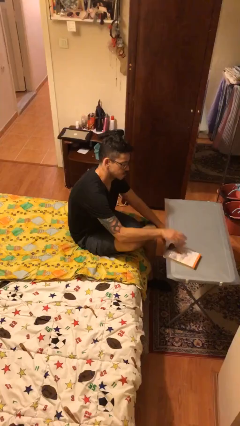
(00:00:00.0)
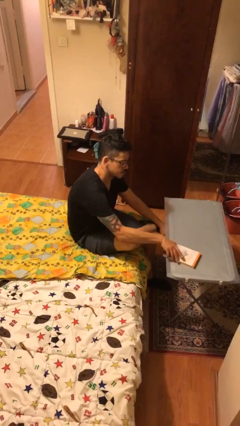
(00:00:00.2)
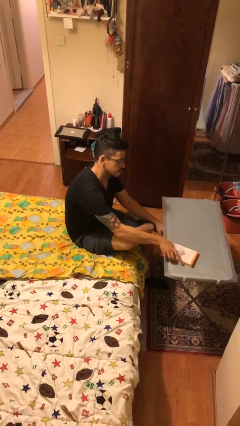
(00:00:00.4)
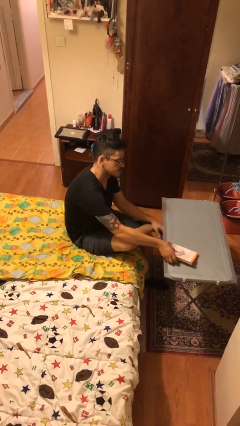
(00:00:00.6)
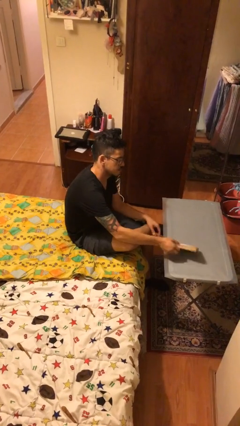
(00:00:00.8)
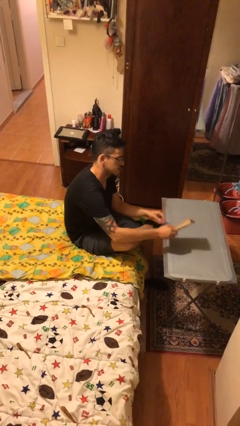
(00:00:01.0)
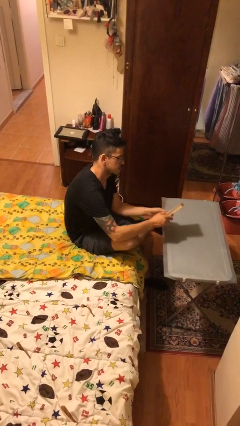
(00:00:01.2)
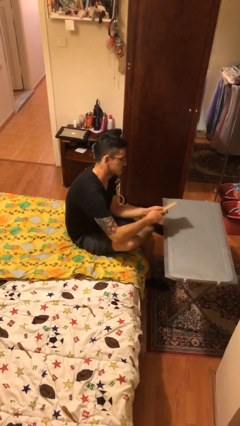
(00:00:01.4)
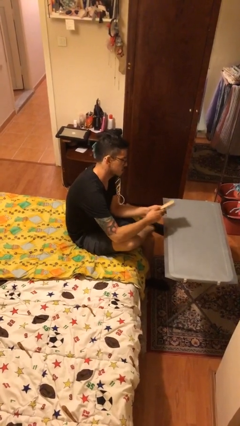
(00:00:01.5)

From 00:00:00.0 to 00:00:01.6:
person picks up object from table

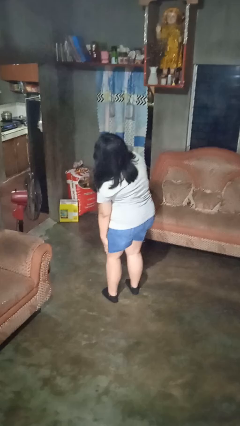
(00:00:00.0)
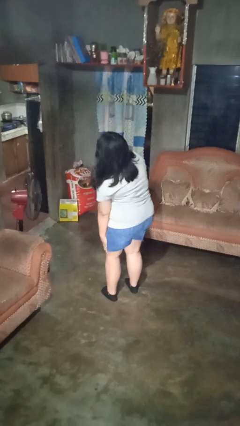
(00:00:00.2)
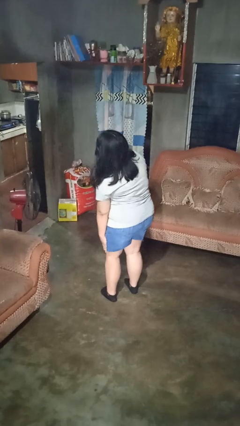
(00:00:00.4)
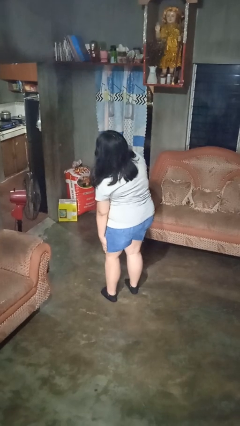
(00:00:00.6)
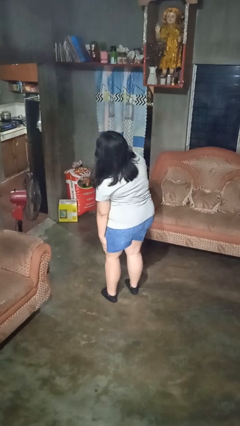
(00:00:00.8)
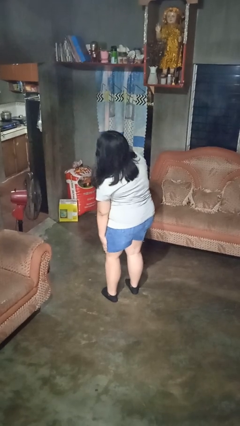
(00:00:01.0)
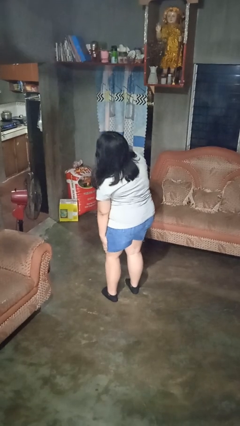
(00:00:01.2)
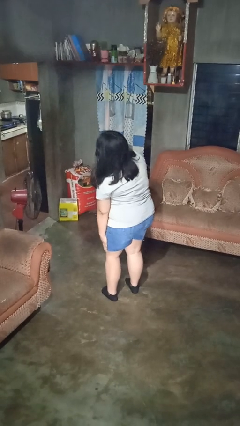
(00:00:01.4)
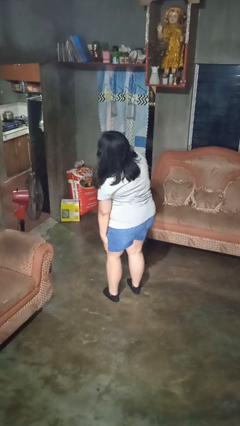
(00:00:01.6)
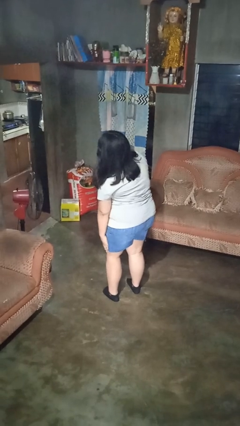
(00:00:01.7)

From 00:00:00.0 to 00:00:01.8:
person swats bug

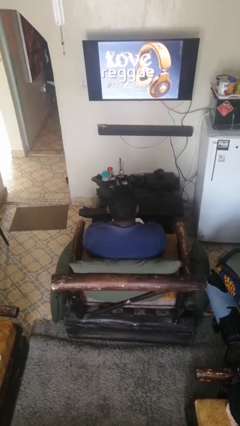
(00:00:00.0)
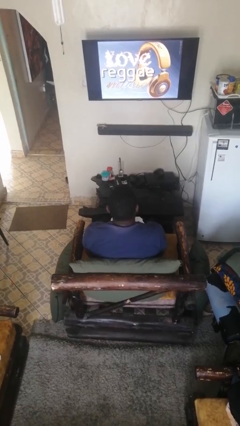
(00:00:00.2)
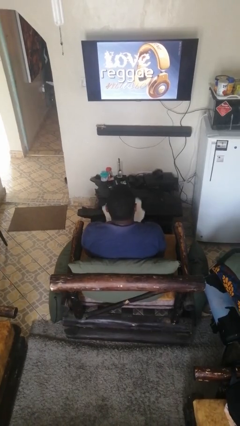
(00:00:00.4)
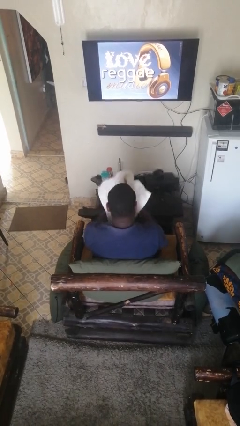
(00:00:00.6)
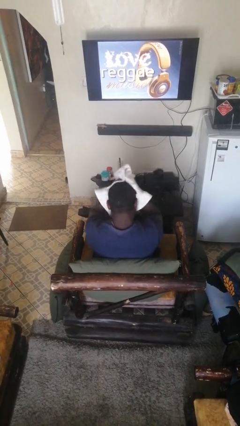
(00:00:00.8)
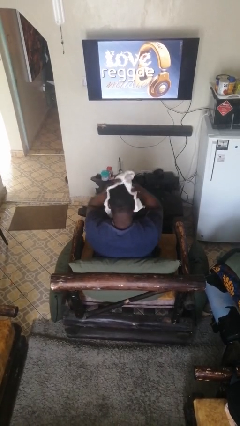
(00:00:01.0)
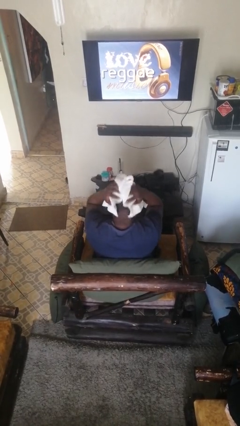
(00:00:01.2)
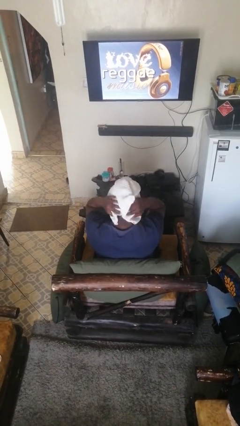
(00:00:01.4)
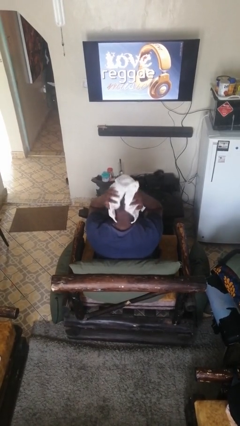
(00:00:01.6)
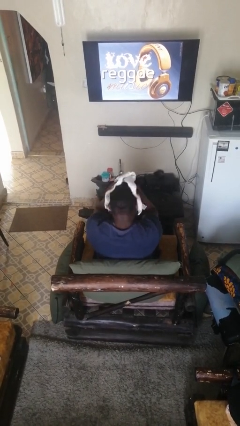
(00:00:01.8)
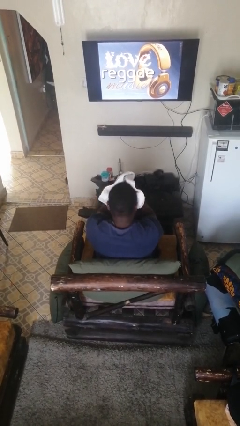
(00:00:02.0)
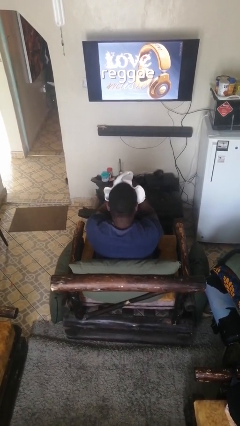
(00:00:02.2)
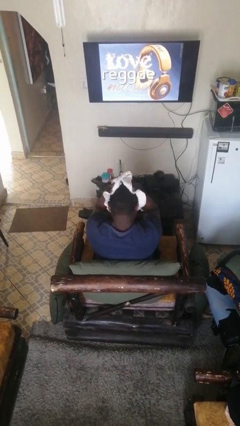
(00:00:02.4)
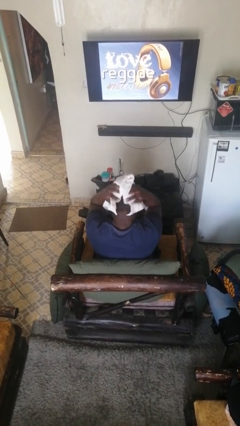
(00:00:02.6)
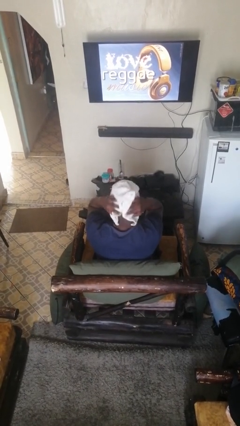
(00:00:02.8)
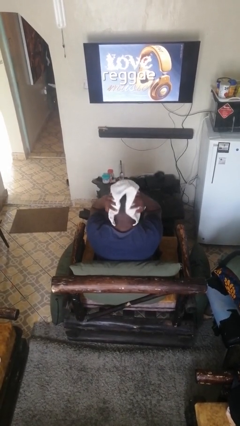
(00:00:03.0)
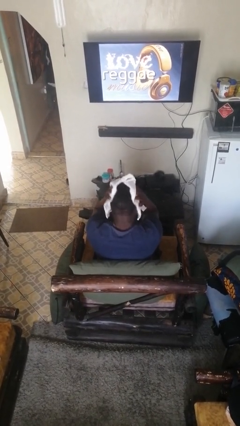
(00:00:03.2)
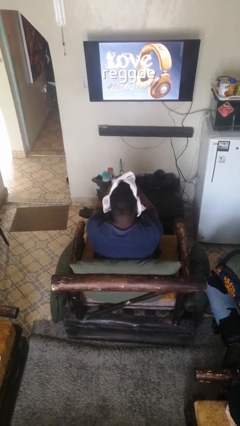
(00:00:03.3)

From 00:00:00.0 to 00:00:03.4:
person dries hair with towel

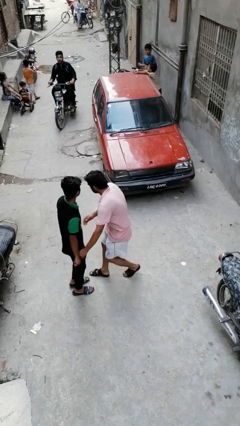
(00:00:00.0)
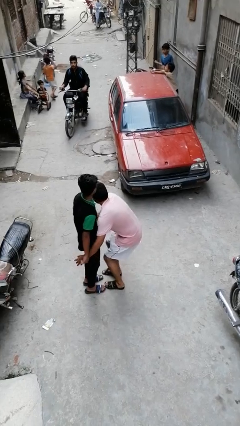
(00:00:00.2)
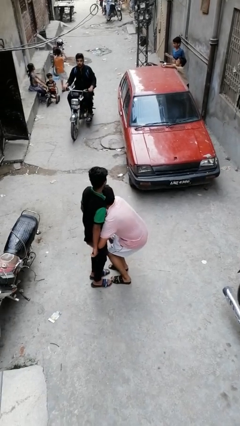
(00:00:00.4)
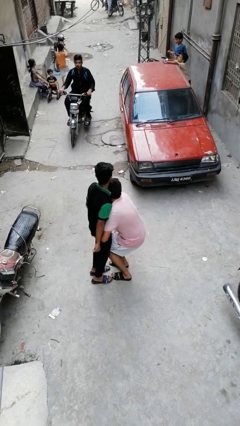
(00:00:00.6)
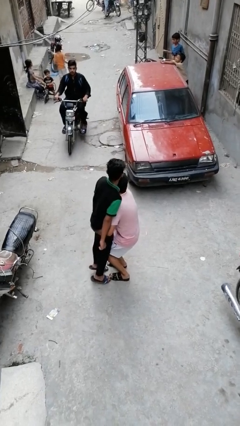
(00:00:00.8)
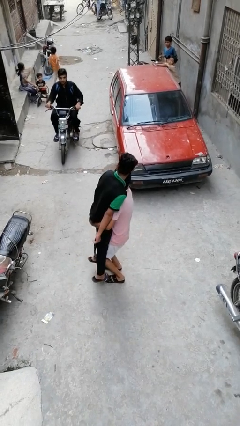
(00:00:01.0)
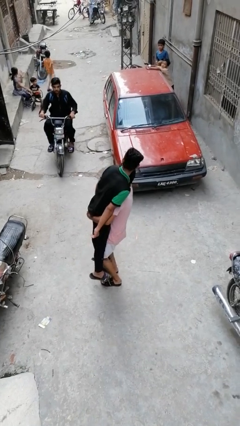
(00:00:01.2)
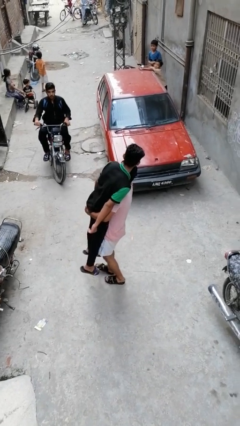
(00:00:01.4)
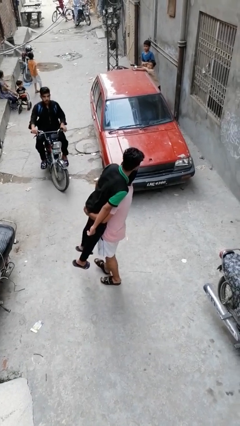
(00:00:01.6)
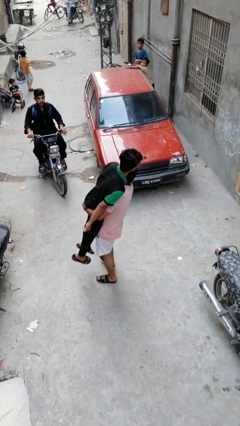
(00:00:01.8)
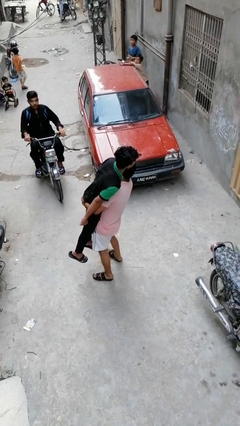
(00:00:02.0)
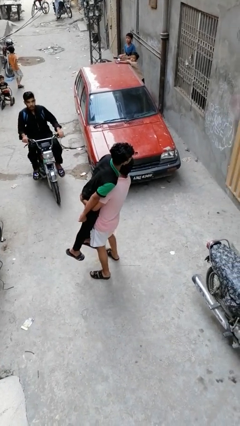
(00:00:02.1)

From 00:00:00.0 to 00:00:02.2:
person picks up person

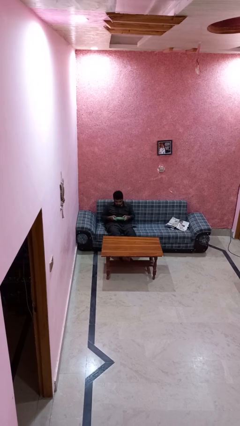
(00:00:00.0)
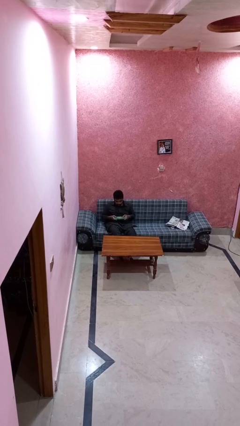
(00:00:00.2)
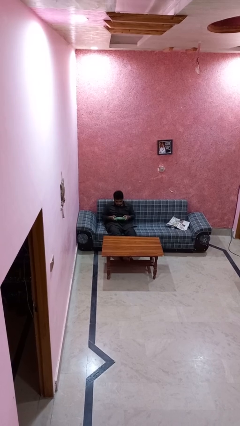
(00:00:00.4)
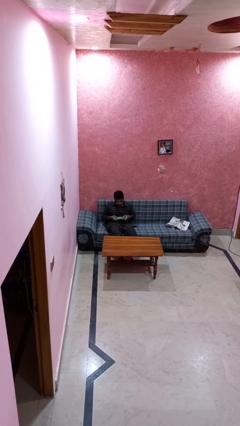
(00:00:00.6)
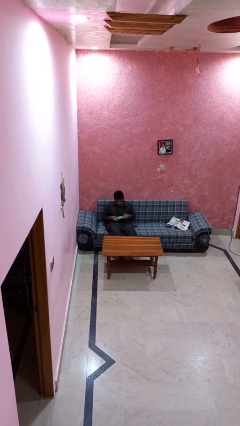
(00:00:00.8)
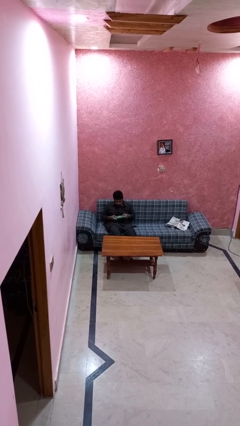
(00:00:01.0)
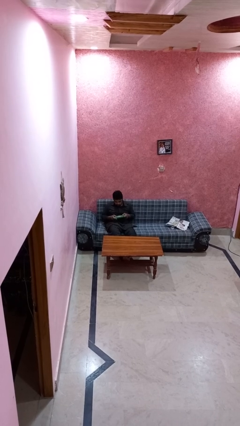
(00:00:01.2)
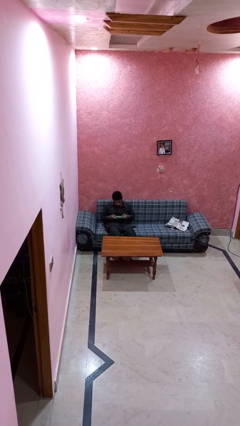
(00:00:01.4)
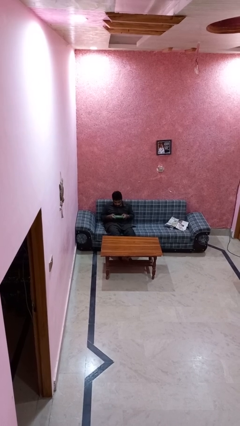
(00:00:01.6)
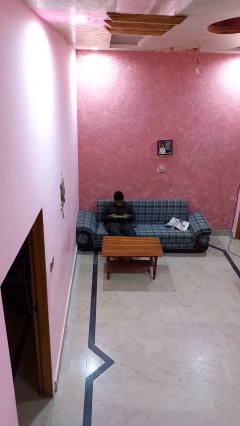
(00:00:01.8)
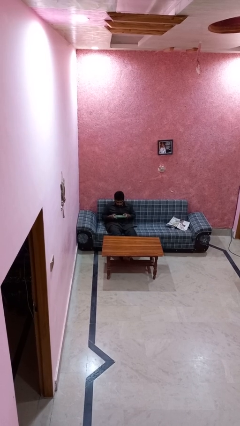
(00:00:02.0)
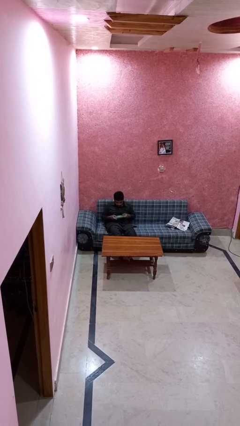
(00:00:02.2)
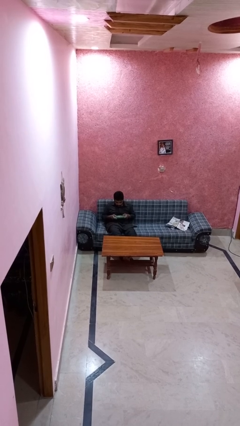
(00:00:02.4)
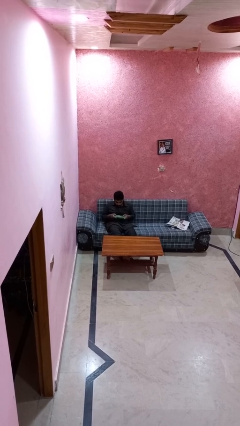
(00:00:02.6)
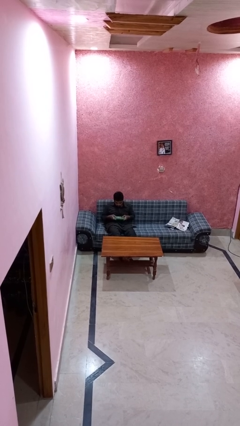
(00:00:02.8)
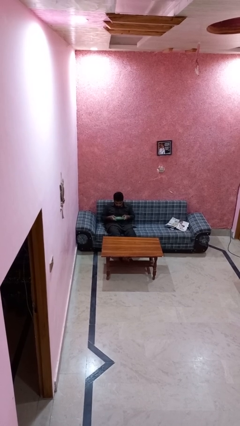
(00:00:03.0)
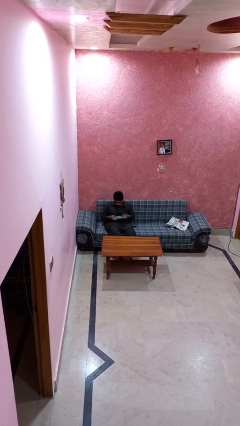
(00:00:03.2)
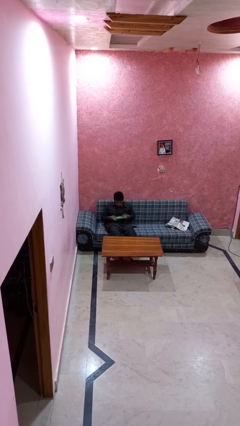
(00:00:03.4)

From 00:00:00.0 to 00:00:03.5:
person interacts with handheld game

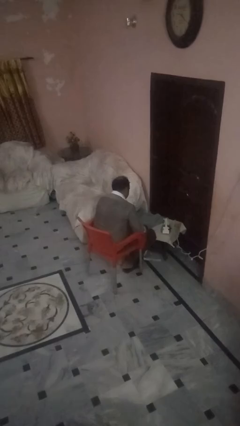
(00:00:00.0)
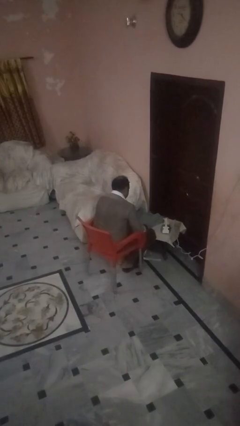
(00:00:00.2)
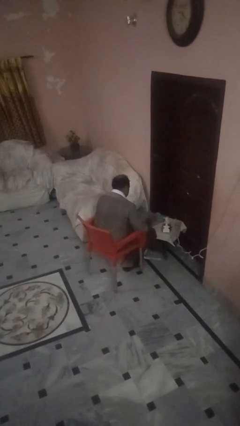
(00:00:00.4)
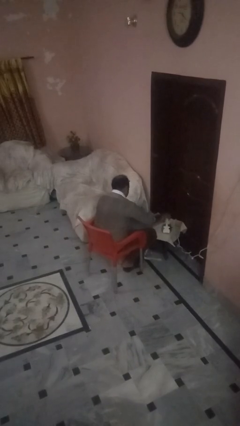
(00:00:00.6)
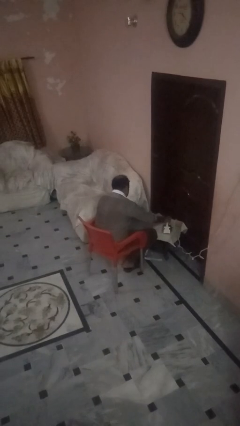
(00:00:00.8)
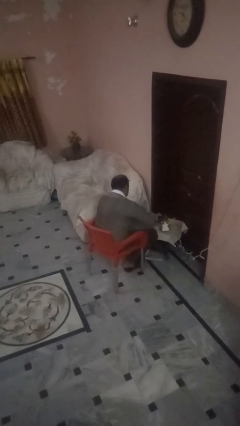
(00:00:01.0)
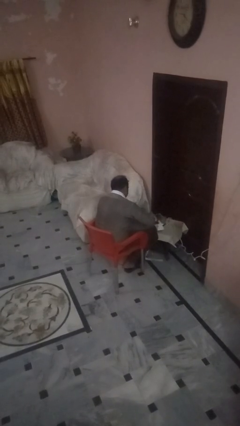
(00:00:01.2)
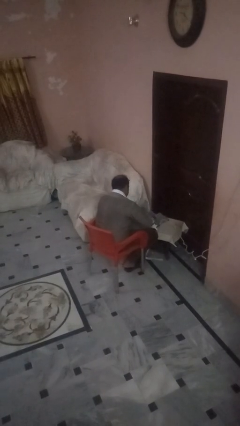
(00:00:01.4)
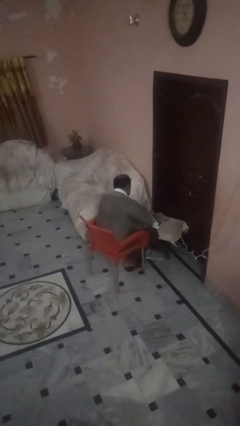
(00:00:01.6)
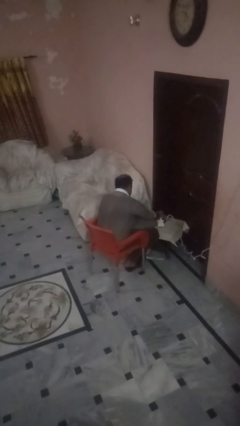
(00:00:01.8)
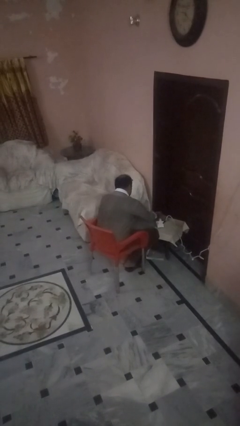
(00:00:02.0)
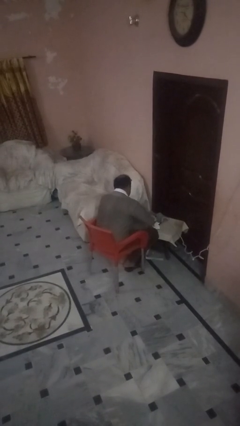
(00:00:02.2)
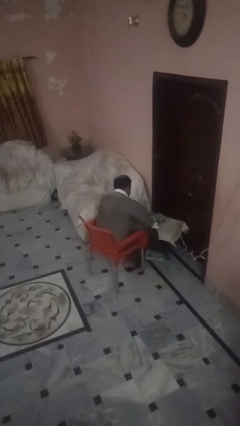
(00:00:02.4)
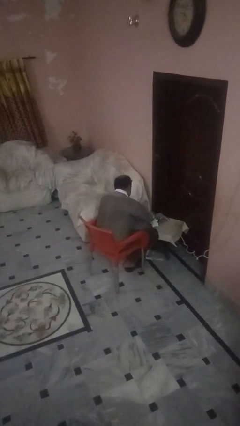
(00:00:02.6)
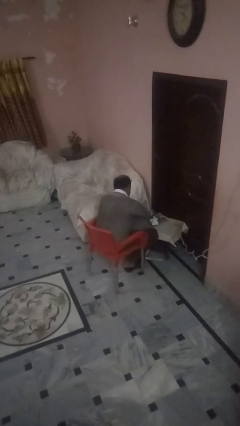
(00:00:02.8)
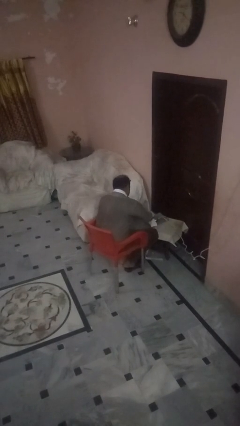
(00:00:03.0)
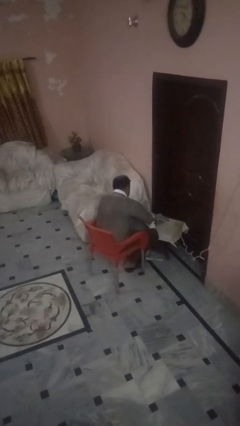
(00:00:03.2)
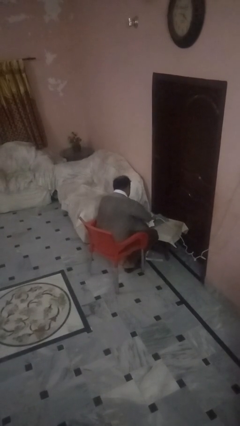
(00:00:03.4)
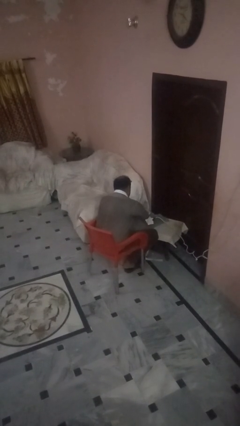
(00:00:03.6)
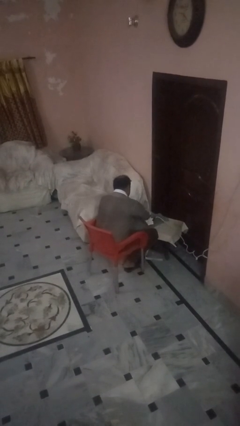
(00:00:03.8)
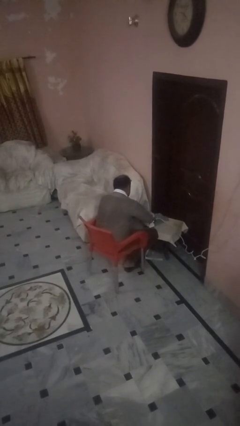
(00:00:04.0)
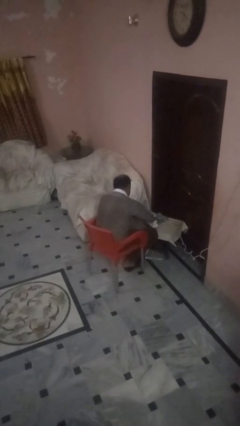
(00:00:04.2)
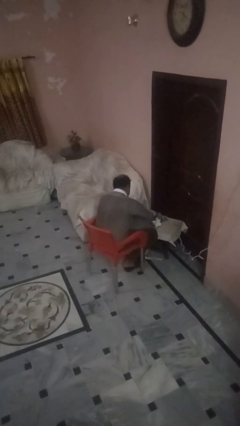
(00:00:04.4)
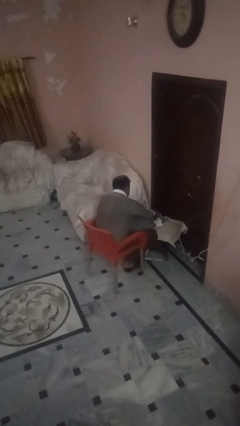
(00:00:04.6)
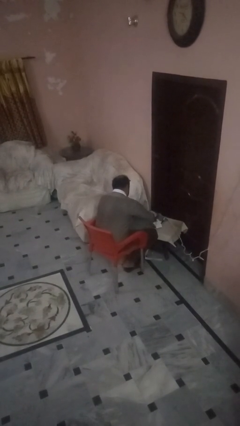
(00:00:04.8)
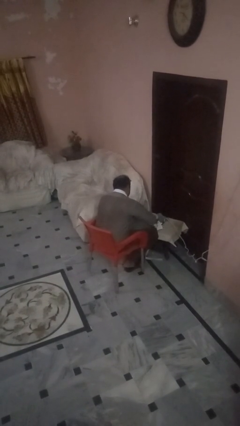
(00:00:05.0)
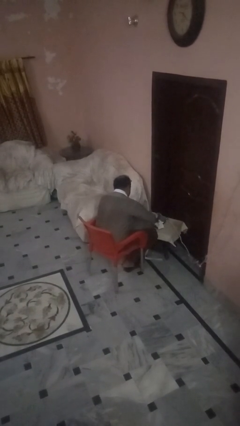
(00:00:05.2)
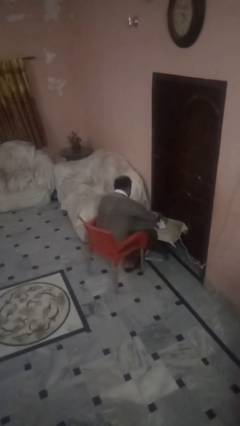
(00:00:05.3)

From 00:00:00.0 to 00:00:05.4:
person irons clothes
